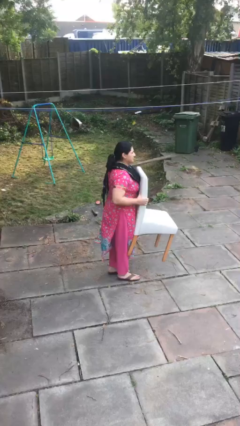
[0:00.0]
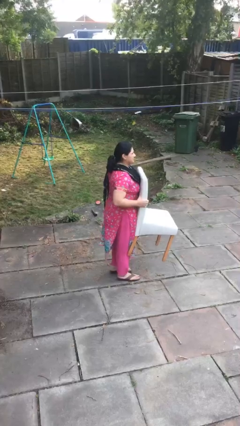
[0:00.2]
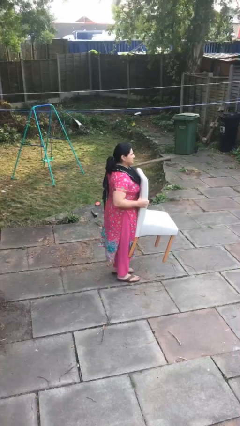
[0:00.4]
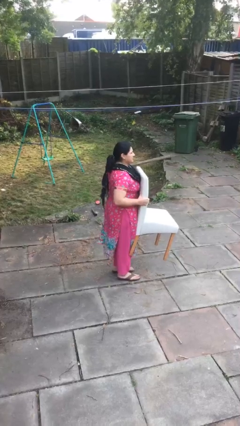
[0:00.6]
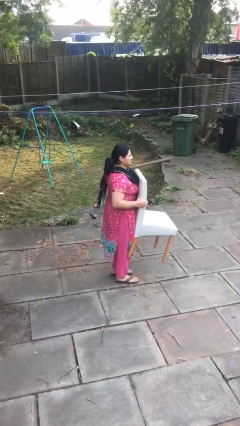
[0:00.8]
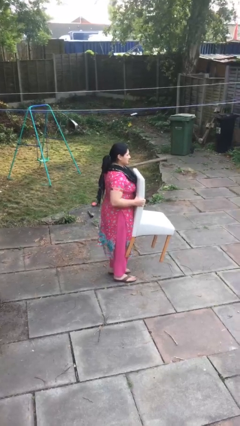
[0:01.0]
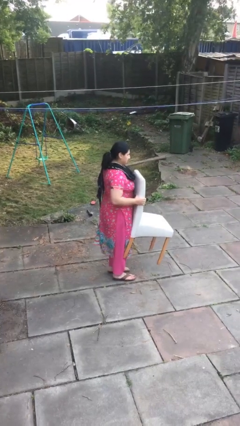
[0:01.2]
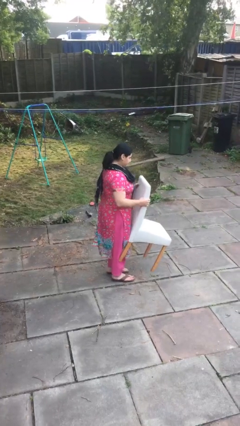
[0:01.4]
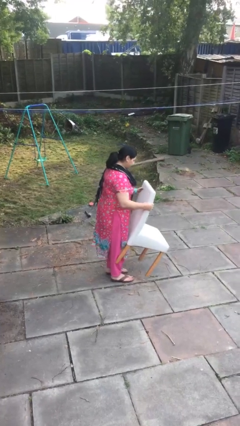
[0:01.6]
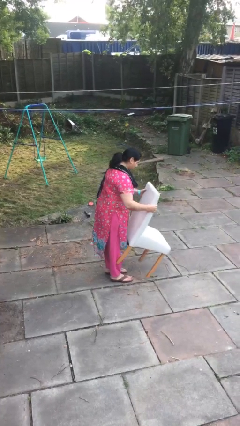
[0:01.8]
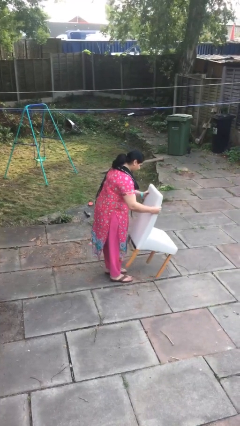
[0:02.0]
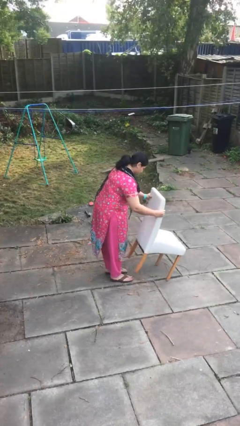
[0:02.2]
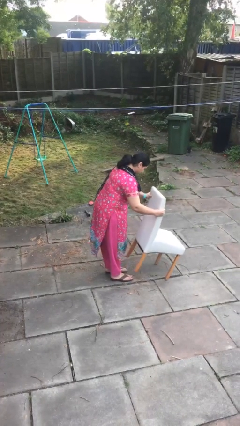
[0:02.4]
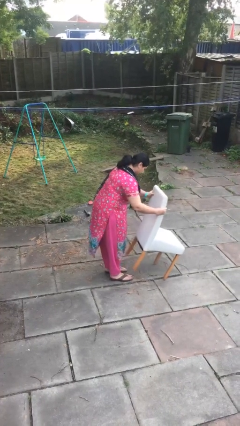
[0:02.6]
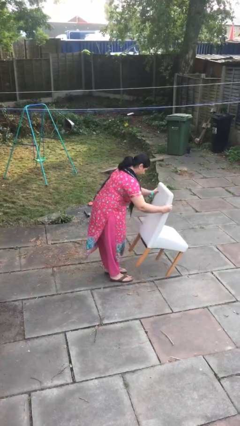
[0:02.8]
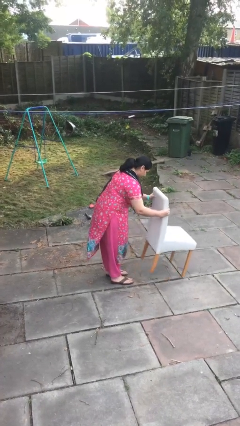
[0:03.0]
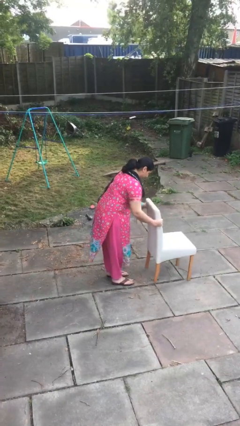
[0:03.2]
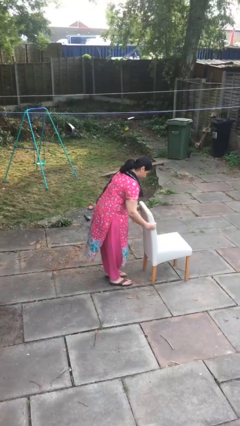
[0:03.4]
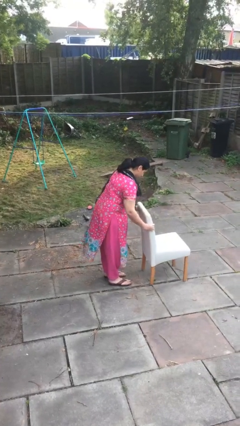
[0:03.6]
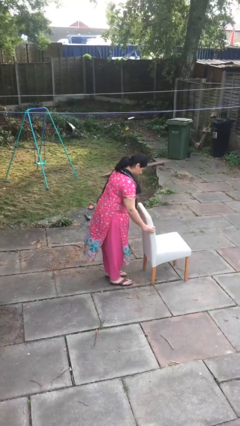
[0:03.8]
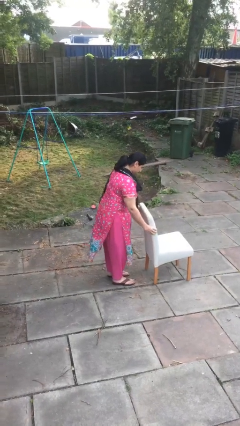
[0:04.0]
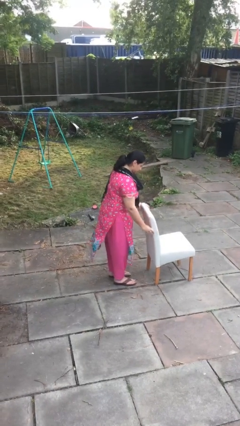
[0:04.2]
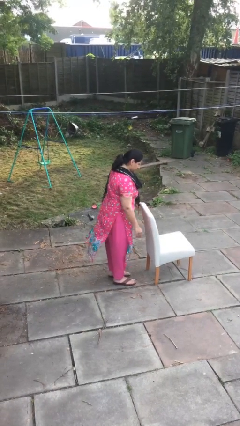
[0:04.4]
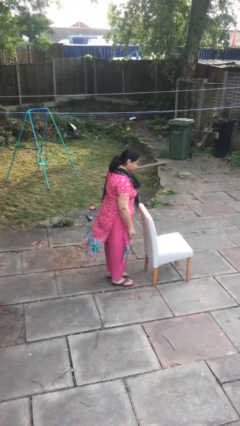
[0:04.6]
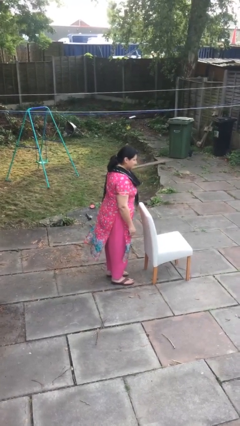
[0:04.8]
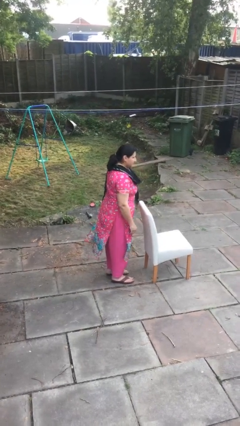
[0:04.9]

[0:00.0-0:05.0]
person puts down object on floor

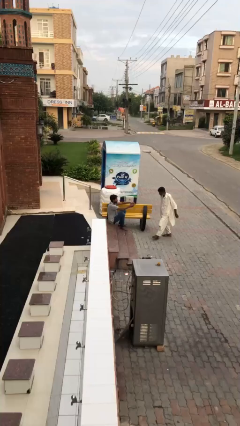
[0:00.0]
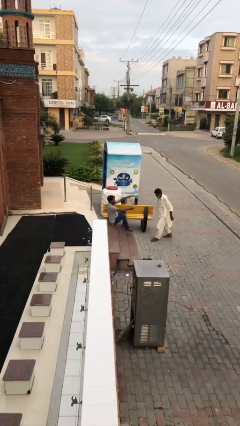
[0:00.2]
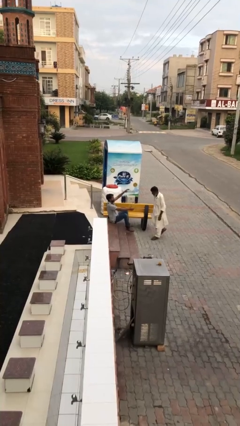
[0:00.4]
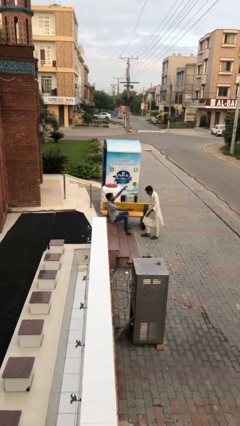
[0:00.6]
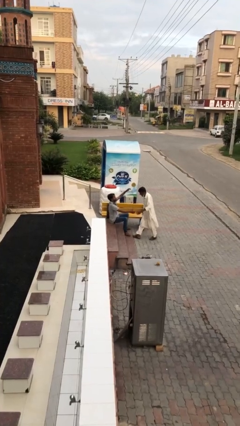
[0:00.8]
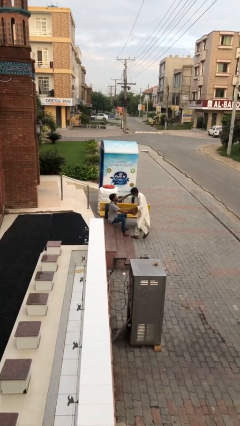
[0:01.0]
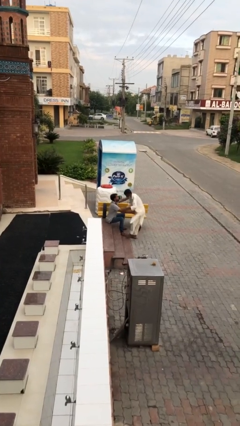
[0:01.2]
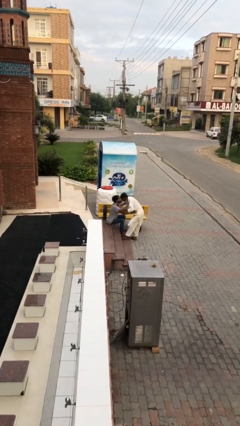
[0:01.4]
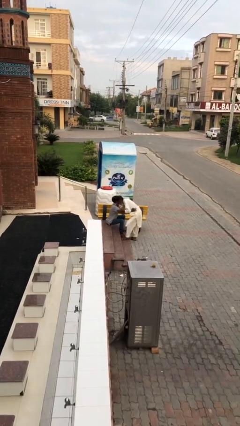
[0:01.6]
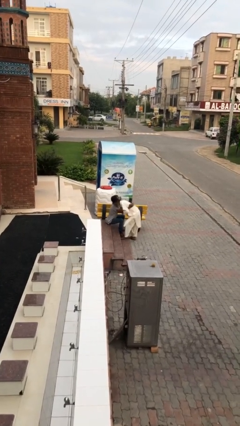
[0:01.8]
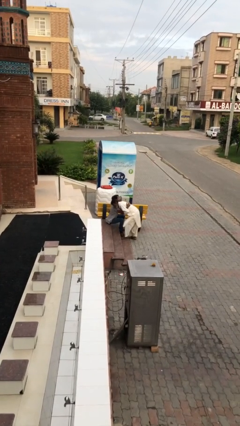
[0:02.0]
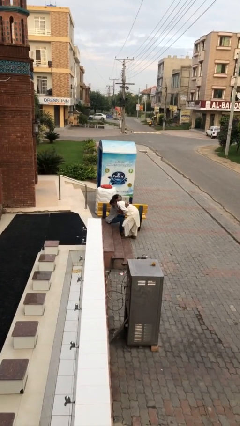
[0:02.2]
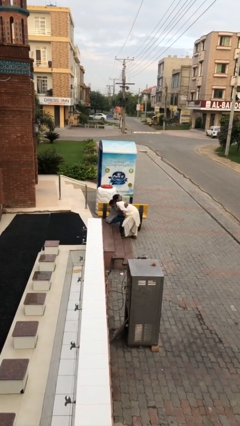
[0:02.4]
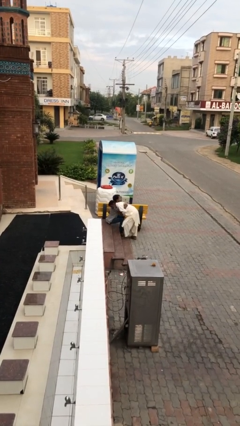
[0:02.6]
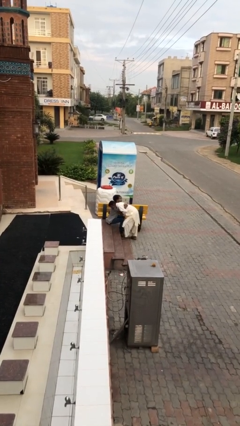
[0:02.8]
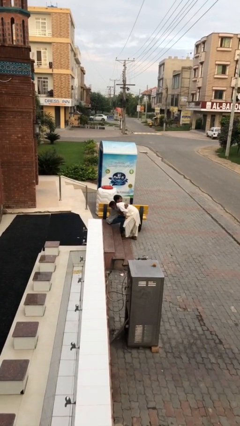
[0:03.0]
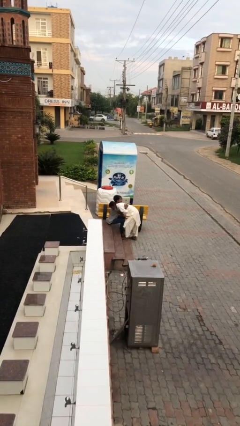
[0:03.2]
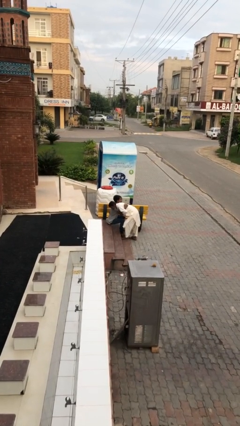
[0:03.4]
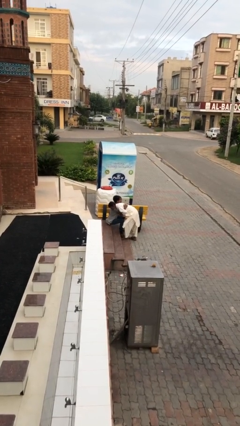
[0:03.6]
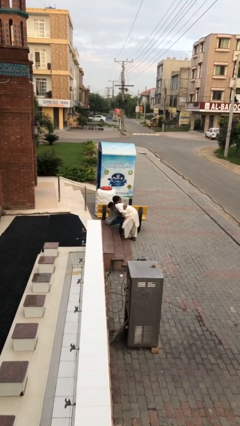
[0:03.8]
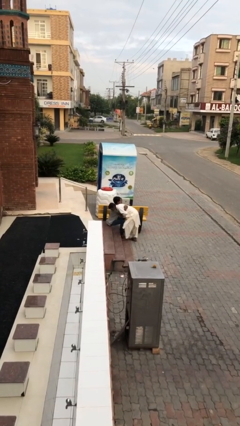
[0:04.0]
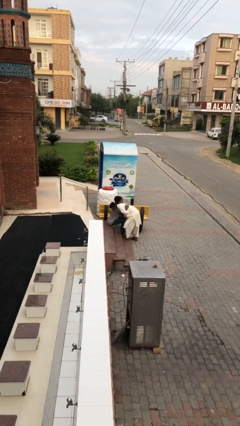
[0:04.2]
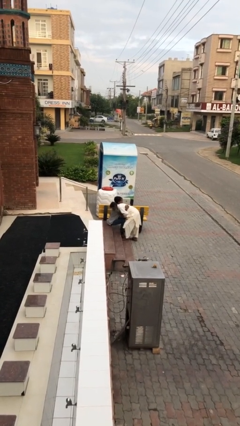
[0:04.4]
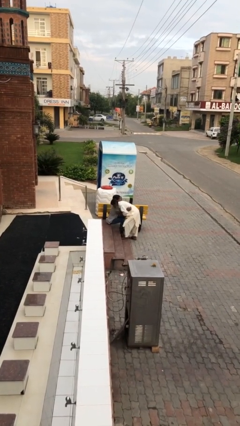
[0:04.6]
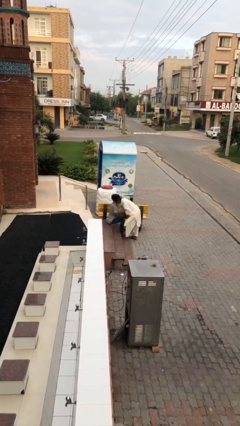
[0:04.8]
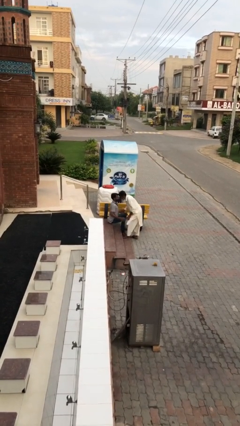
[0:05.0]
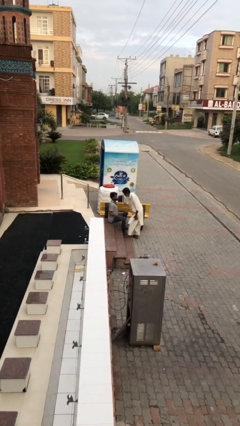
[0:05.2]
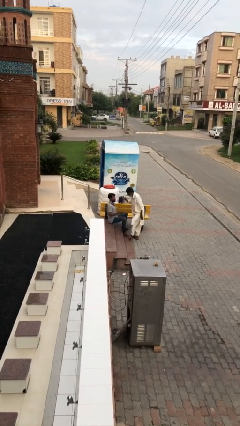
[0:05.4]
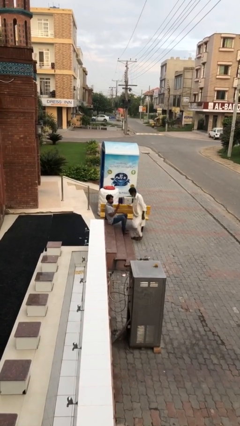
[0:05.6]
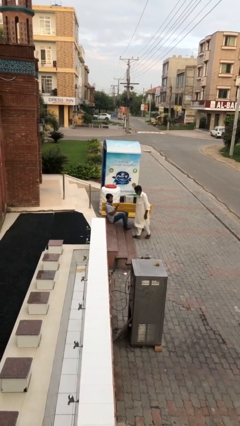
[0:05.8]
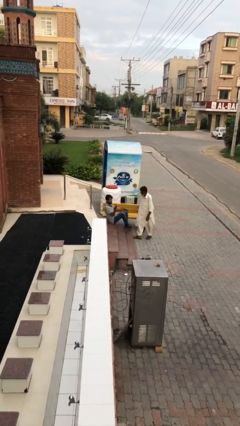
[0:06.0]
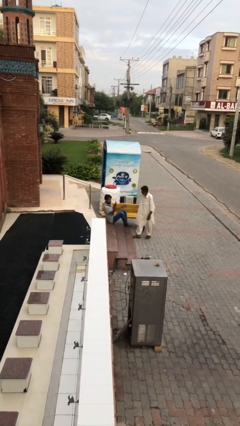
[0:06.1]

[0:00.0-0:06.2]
person embraces person

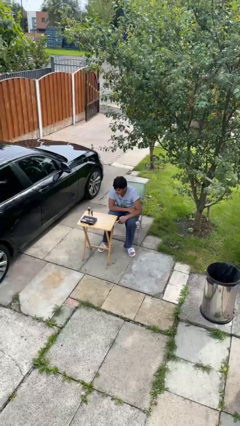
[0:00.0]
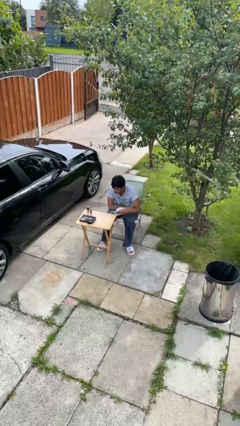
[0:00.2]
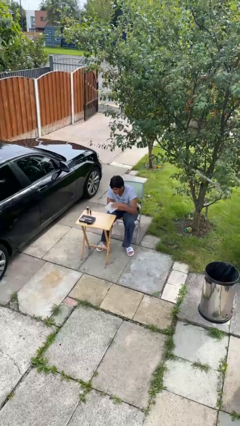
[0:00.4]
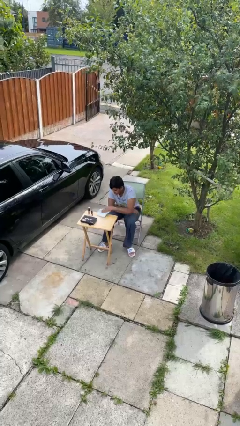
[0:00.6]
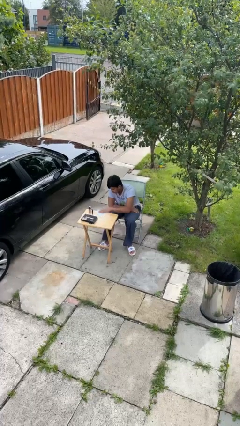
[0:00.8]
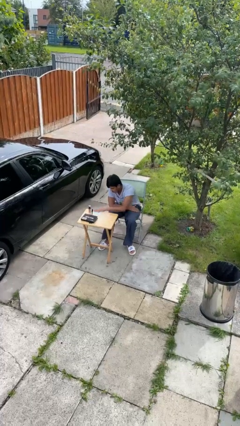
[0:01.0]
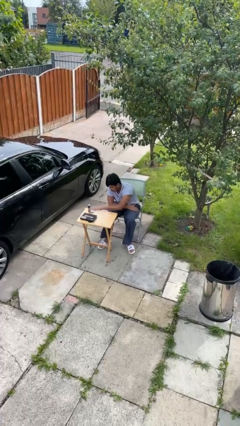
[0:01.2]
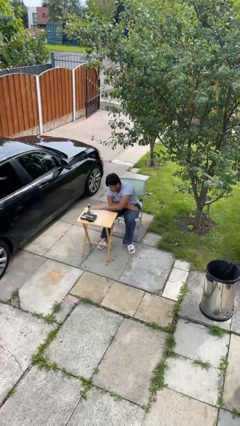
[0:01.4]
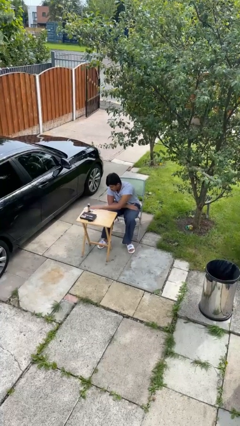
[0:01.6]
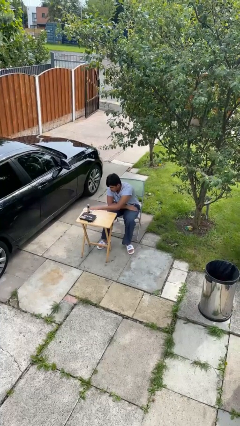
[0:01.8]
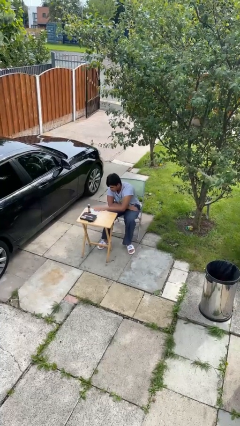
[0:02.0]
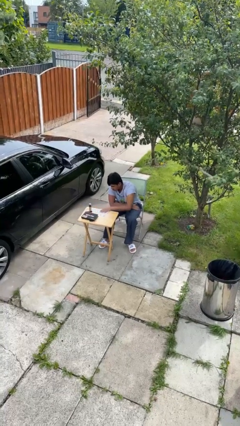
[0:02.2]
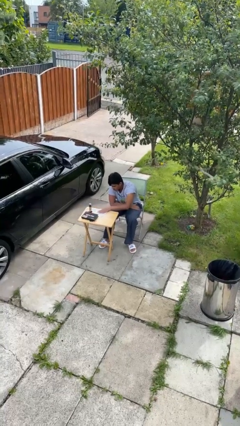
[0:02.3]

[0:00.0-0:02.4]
person cleans table with rag

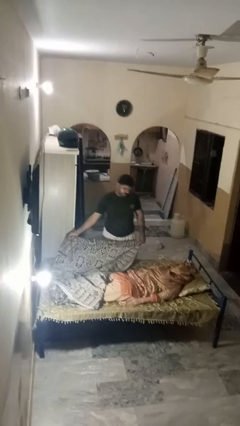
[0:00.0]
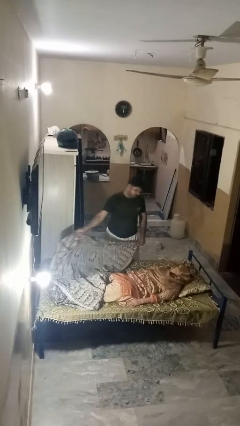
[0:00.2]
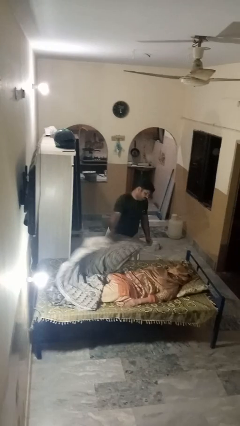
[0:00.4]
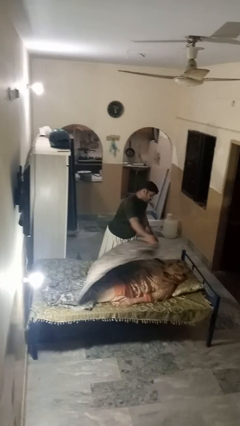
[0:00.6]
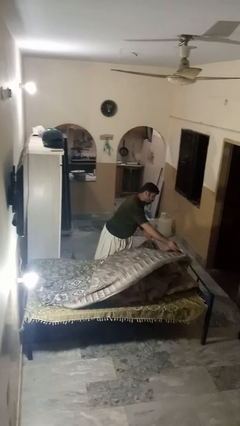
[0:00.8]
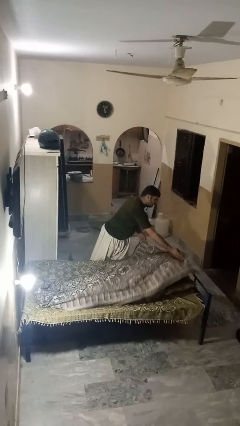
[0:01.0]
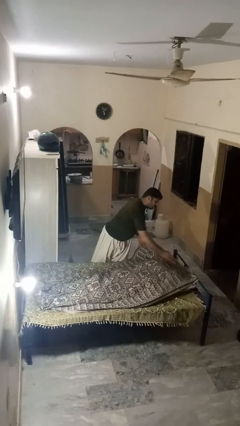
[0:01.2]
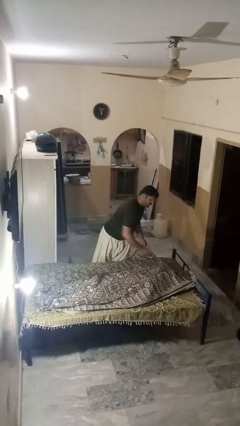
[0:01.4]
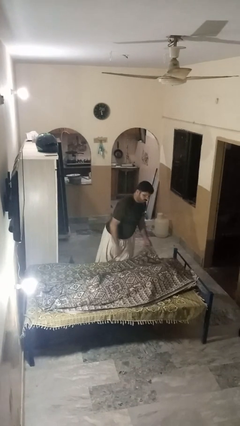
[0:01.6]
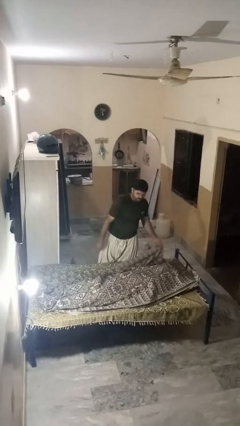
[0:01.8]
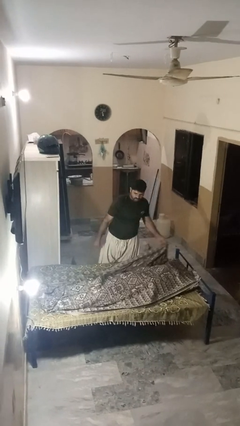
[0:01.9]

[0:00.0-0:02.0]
person covers friend with blanket

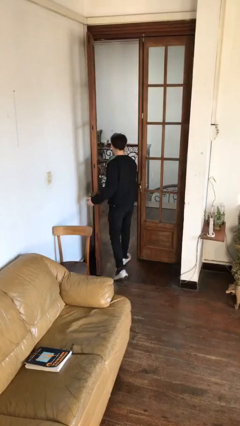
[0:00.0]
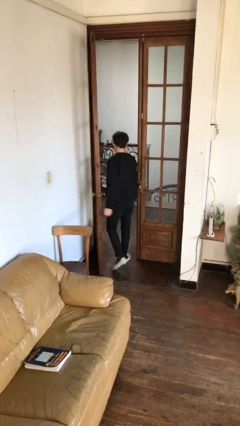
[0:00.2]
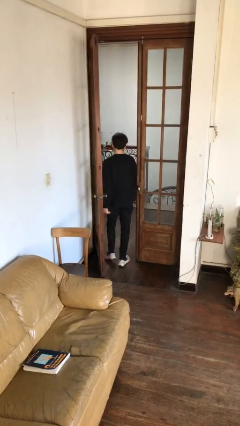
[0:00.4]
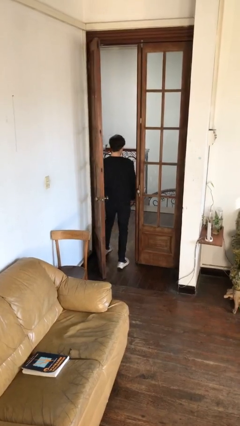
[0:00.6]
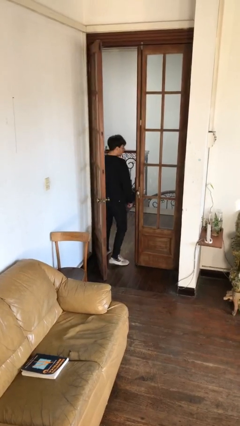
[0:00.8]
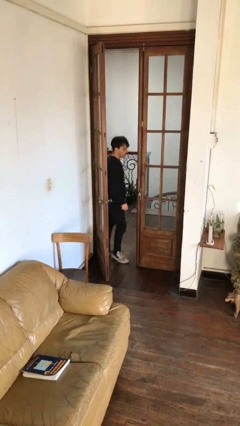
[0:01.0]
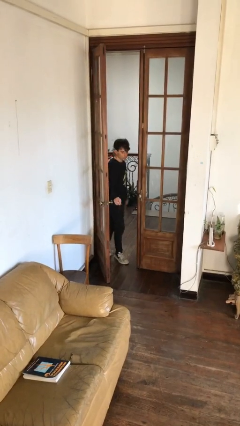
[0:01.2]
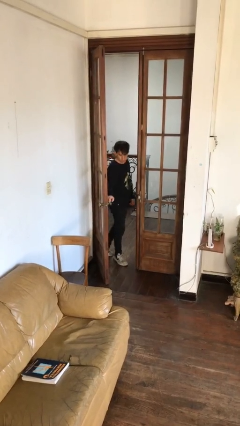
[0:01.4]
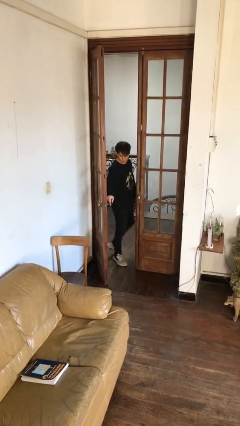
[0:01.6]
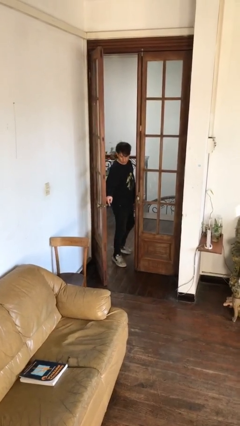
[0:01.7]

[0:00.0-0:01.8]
person exits scene through structure
